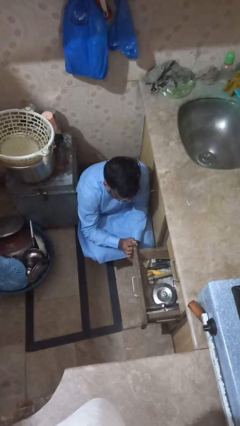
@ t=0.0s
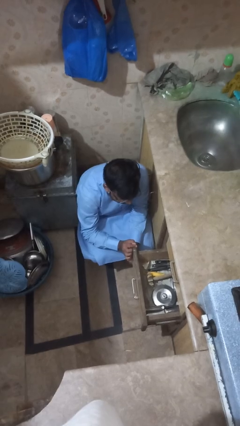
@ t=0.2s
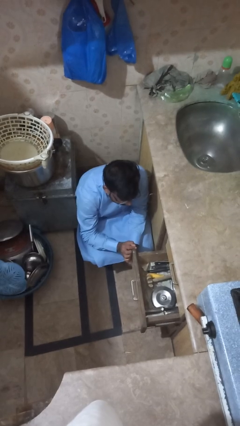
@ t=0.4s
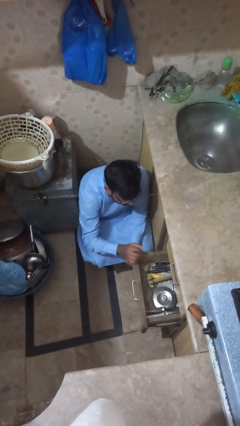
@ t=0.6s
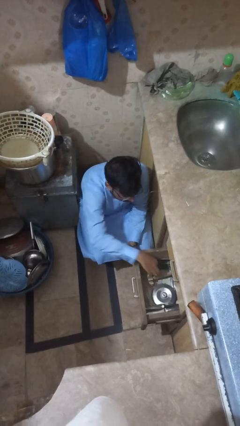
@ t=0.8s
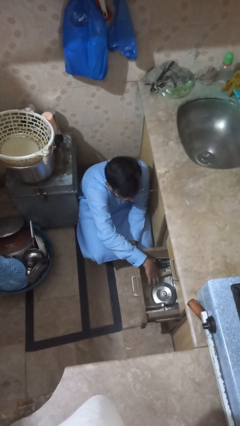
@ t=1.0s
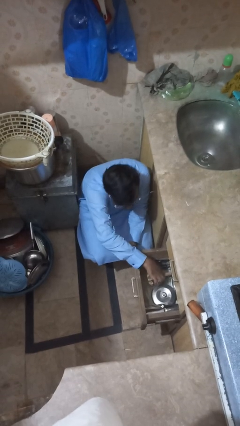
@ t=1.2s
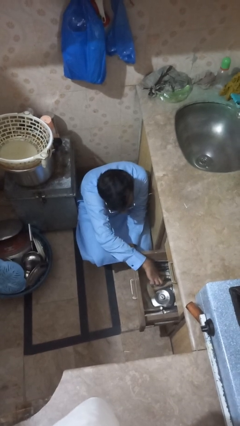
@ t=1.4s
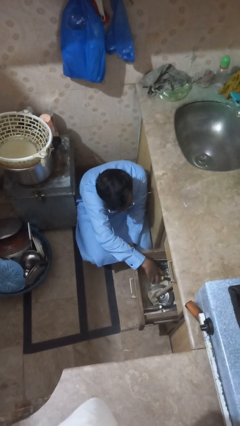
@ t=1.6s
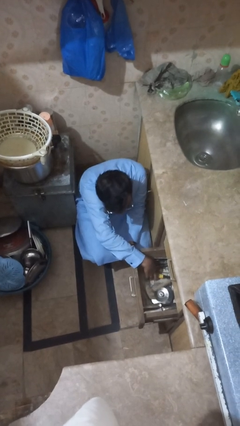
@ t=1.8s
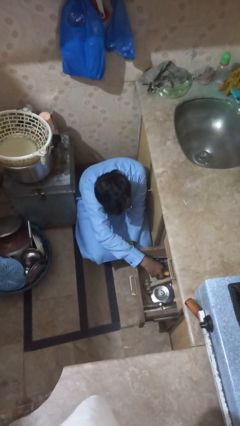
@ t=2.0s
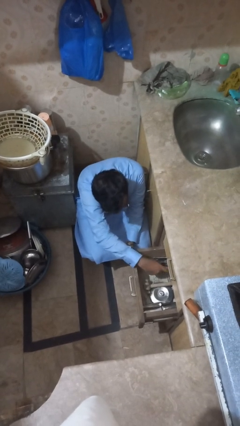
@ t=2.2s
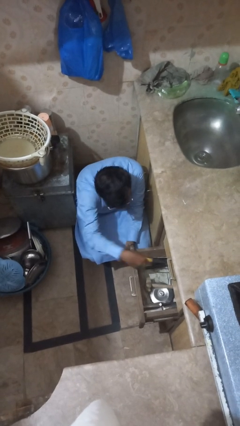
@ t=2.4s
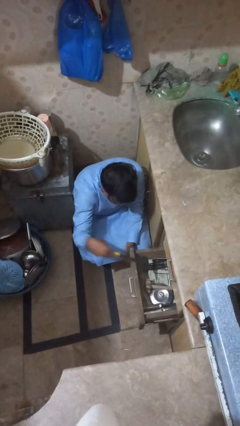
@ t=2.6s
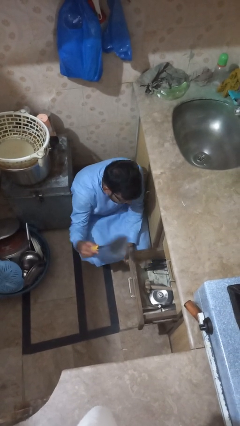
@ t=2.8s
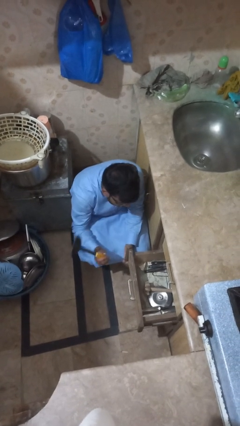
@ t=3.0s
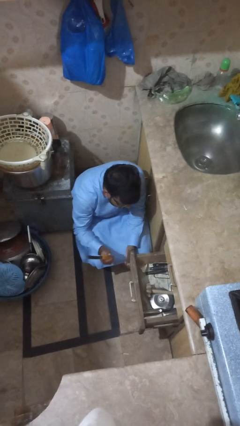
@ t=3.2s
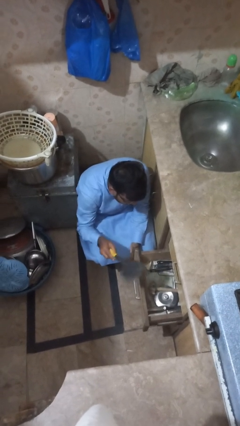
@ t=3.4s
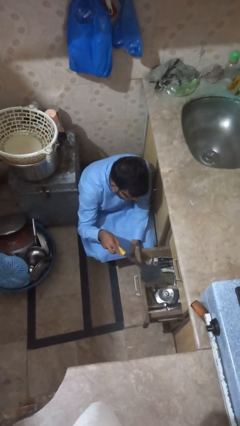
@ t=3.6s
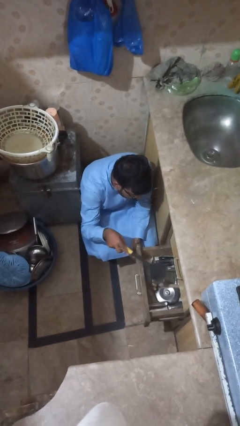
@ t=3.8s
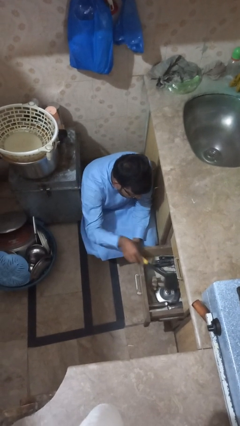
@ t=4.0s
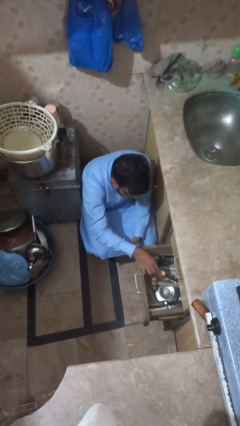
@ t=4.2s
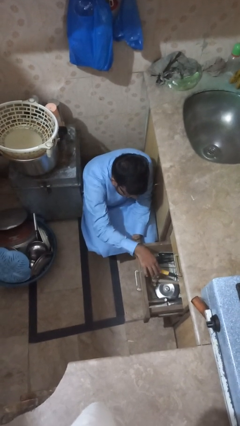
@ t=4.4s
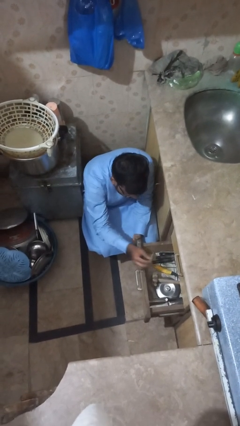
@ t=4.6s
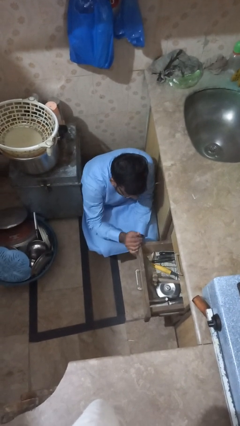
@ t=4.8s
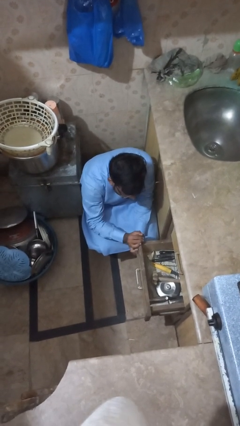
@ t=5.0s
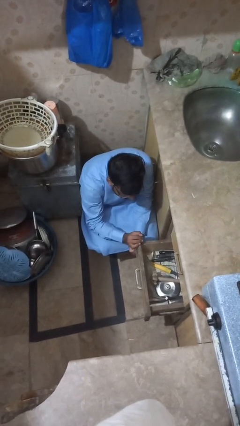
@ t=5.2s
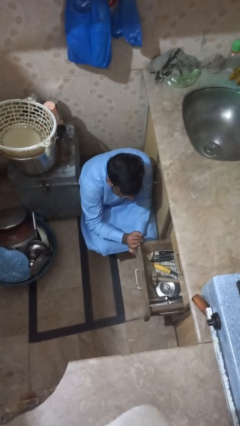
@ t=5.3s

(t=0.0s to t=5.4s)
person searches in kitchen drawer

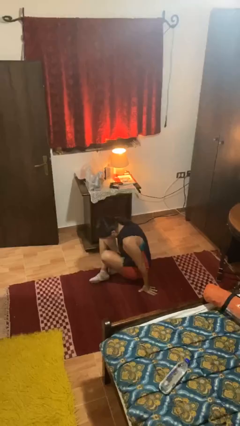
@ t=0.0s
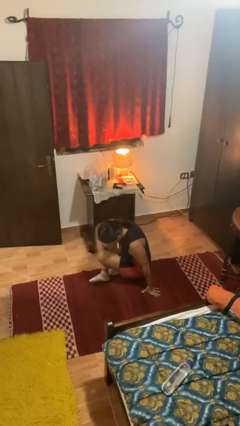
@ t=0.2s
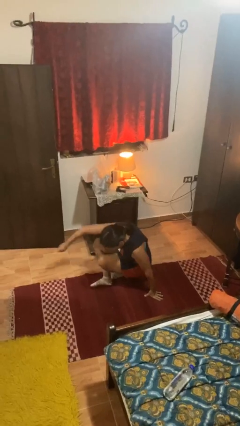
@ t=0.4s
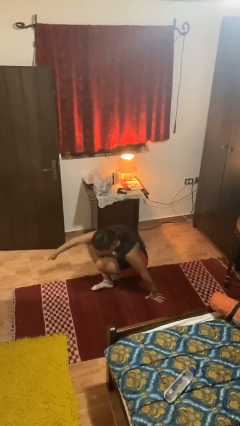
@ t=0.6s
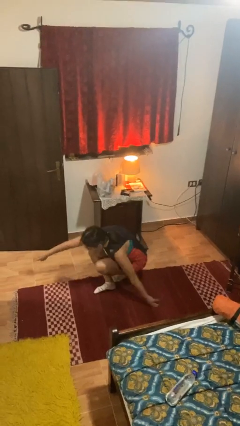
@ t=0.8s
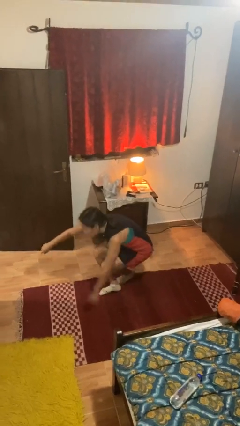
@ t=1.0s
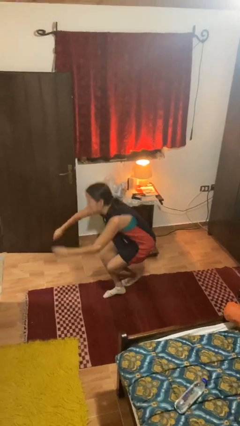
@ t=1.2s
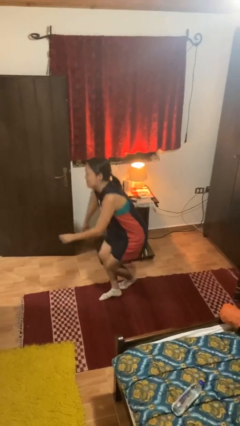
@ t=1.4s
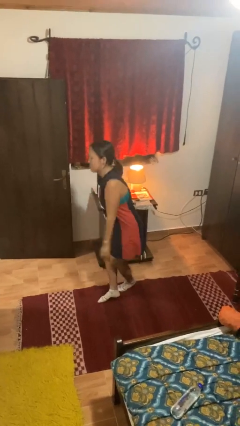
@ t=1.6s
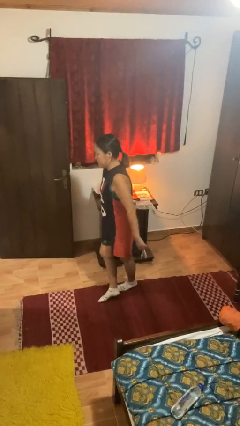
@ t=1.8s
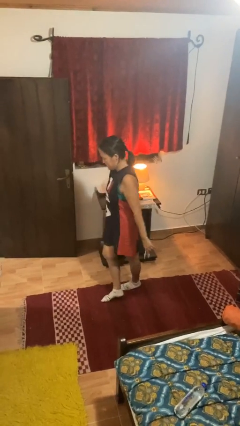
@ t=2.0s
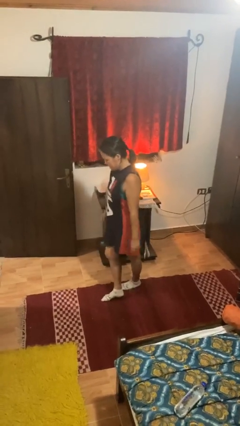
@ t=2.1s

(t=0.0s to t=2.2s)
person stands up from floor

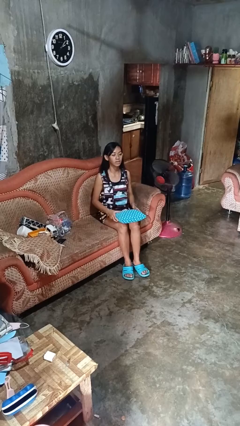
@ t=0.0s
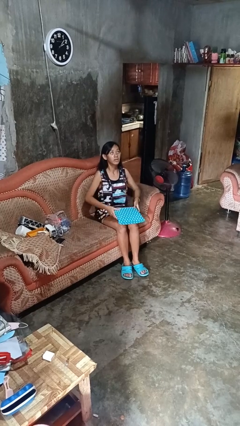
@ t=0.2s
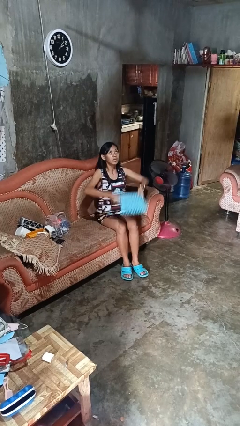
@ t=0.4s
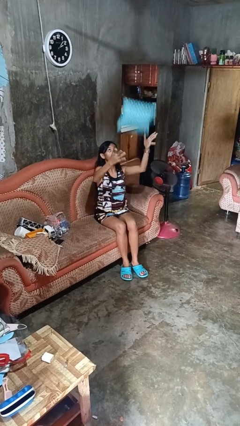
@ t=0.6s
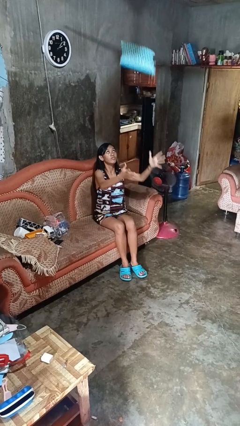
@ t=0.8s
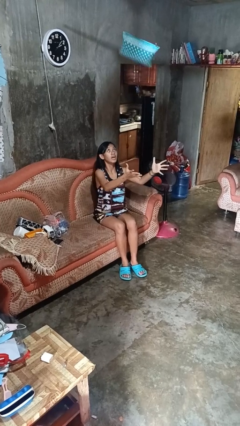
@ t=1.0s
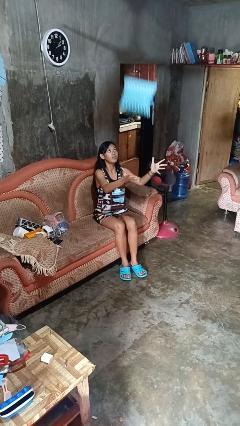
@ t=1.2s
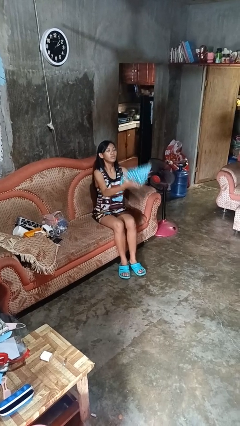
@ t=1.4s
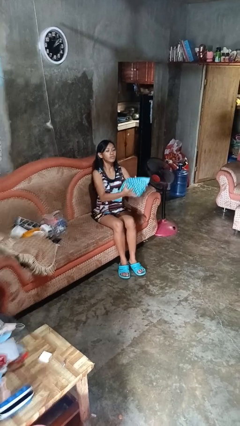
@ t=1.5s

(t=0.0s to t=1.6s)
person drops object

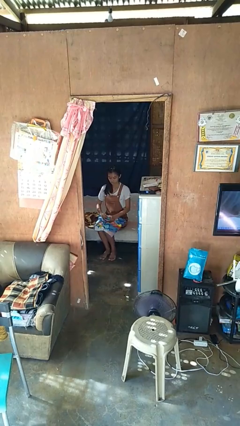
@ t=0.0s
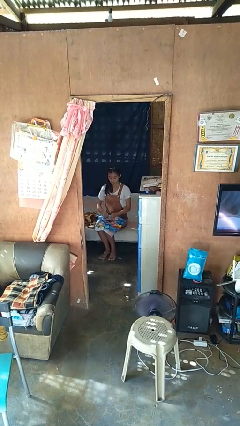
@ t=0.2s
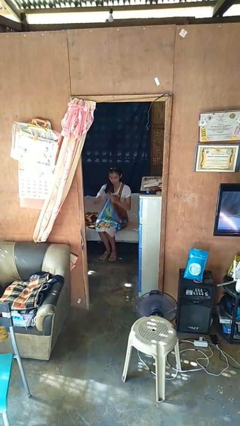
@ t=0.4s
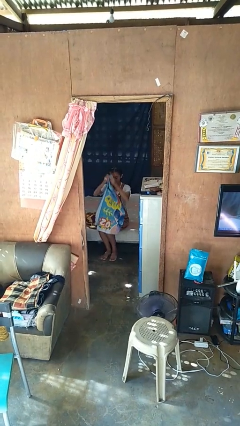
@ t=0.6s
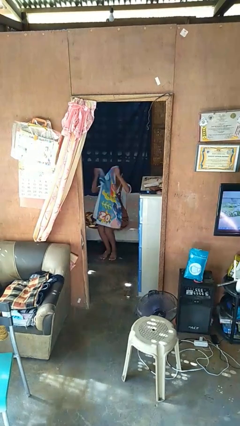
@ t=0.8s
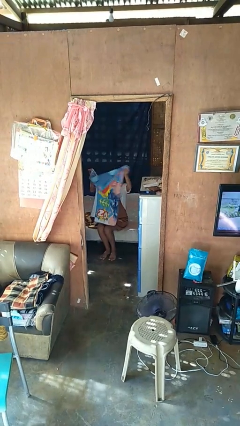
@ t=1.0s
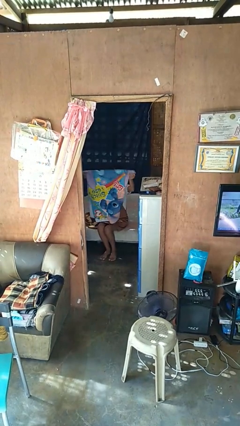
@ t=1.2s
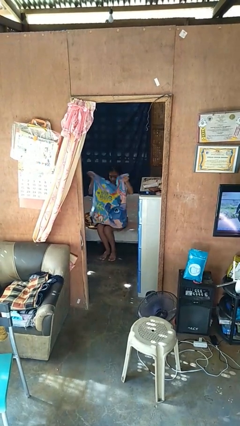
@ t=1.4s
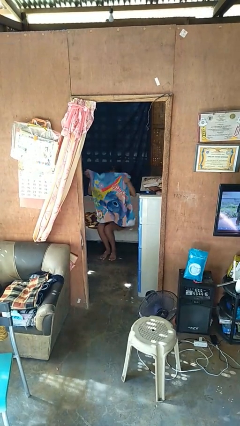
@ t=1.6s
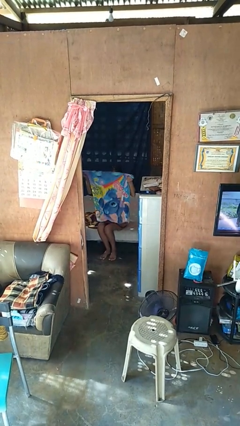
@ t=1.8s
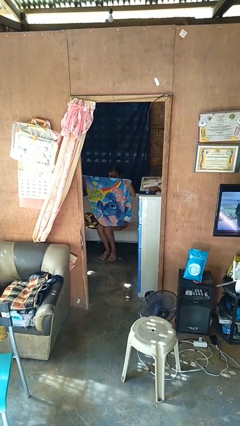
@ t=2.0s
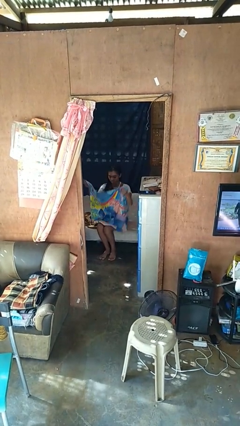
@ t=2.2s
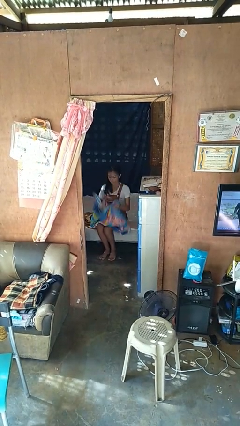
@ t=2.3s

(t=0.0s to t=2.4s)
person unfolds blanket

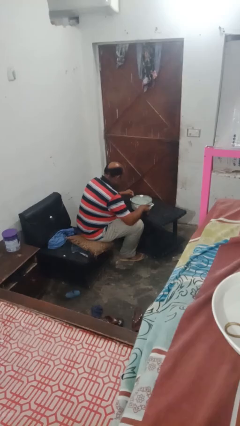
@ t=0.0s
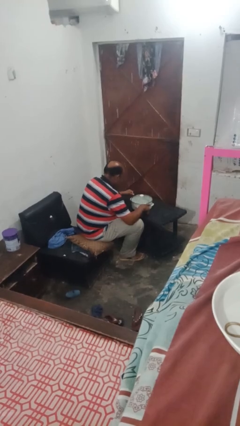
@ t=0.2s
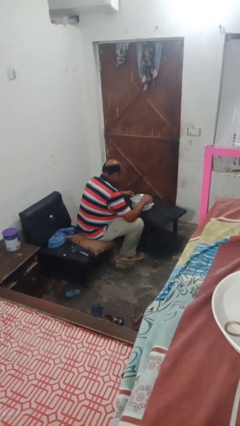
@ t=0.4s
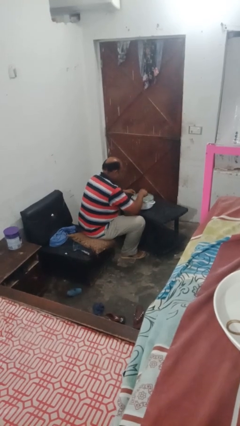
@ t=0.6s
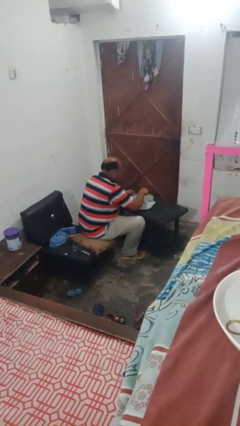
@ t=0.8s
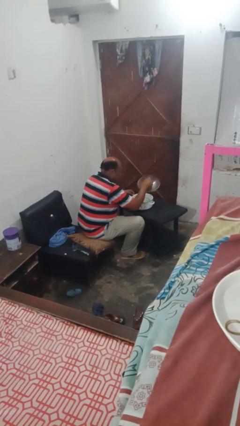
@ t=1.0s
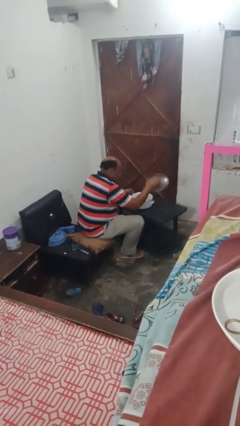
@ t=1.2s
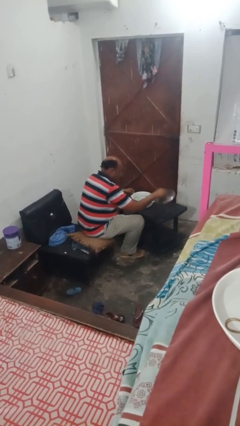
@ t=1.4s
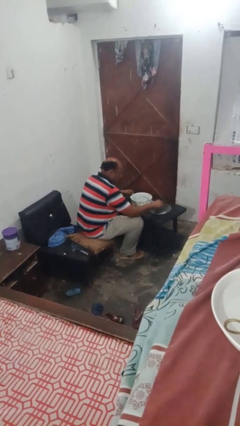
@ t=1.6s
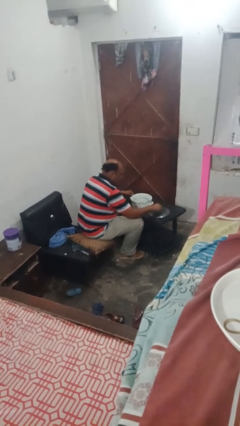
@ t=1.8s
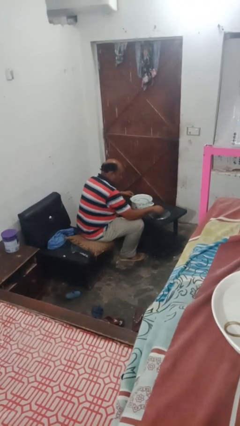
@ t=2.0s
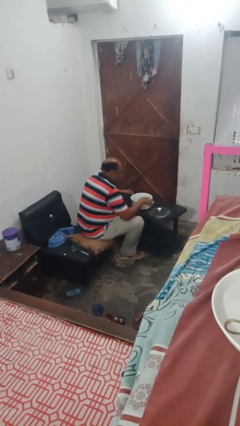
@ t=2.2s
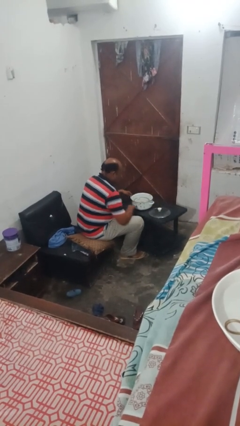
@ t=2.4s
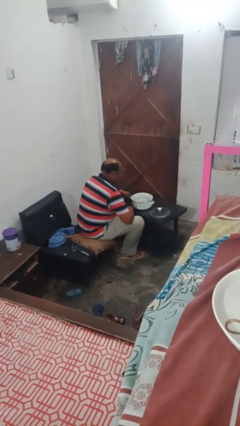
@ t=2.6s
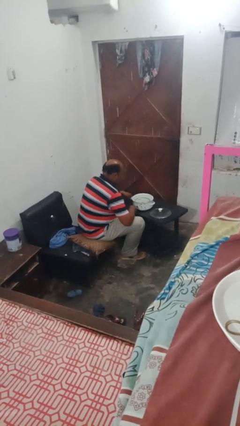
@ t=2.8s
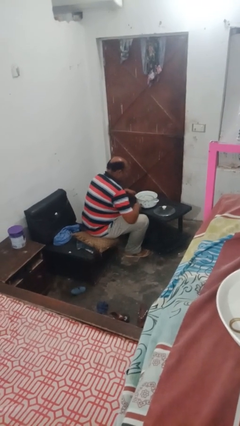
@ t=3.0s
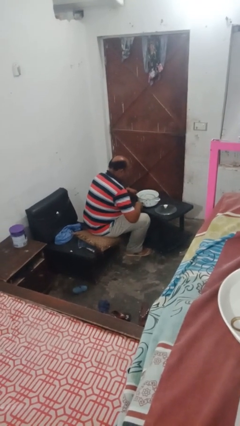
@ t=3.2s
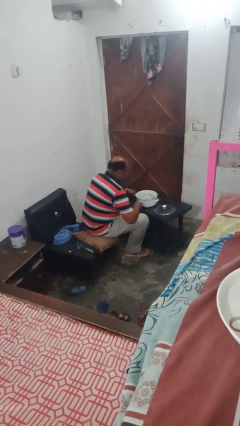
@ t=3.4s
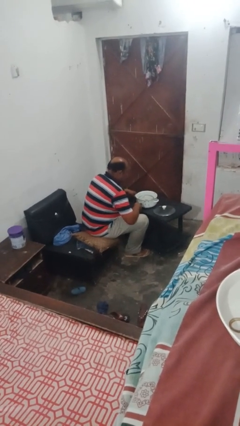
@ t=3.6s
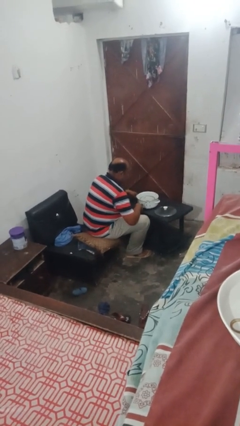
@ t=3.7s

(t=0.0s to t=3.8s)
person opens jar

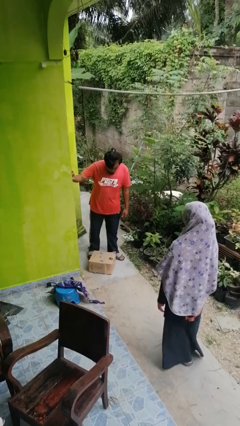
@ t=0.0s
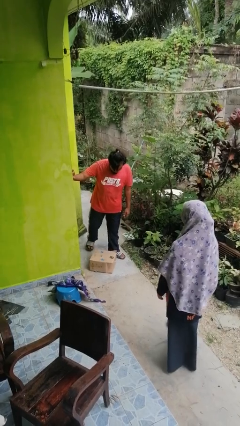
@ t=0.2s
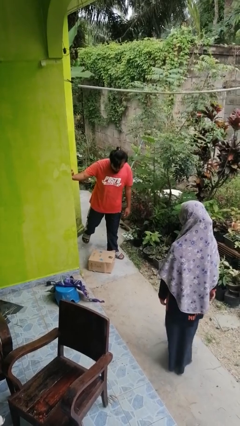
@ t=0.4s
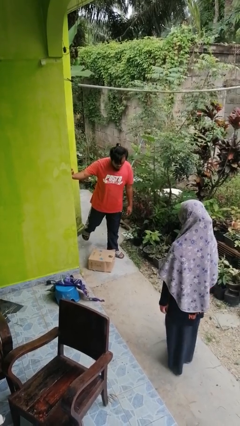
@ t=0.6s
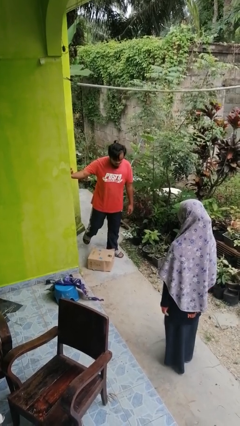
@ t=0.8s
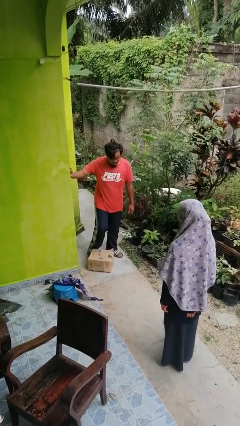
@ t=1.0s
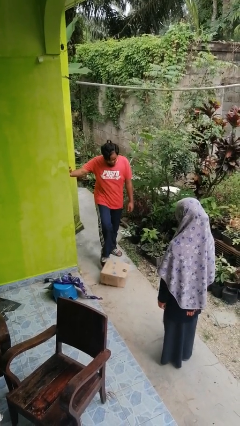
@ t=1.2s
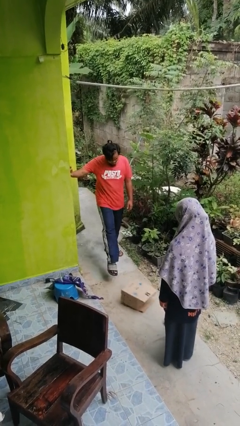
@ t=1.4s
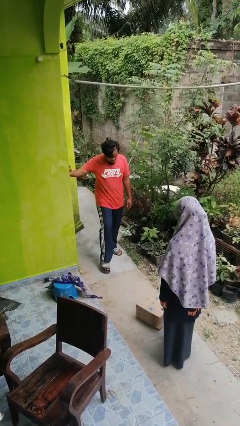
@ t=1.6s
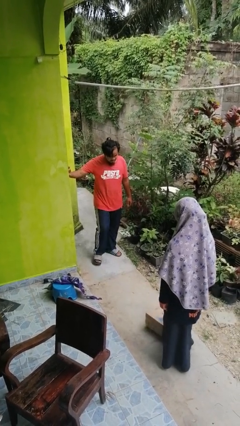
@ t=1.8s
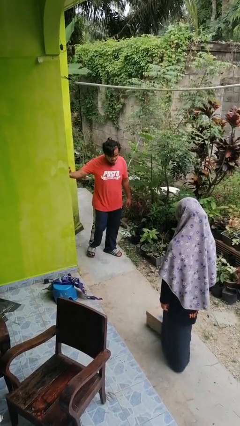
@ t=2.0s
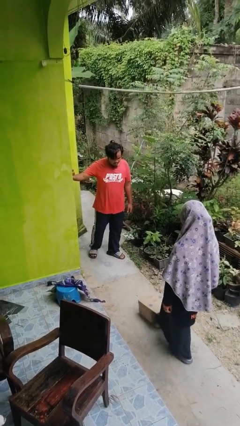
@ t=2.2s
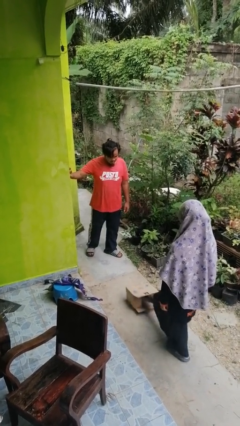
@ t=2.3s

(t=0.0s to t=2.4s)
person kicks object to person
